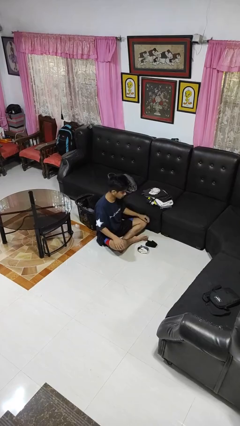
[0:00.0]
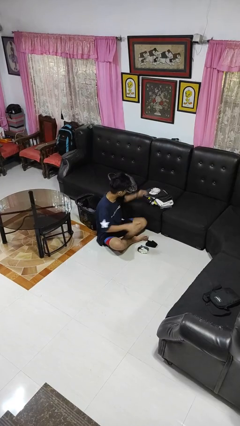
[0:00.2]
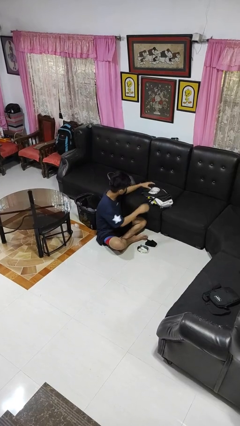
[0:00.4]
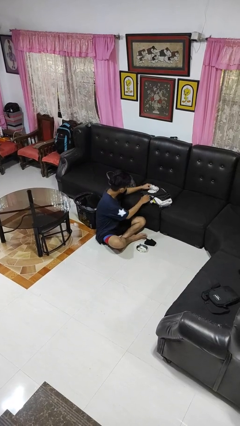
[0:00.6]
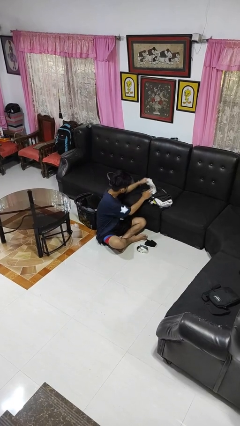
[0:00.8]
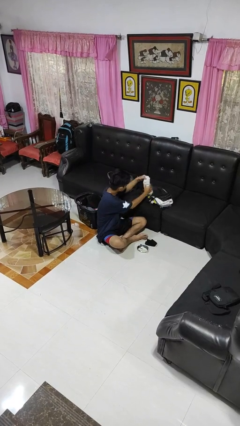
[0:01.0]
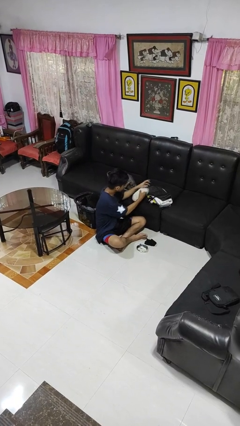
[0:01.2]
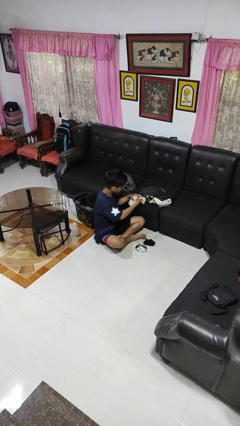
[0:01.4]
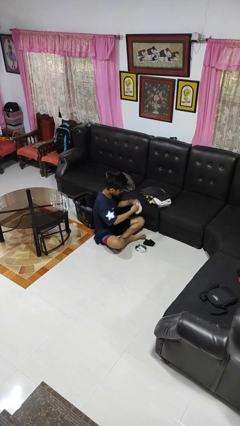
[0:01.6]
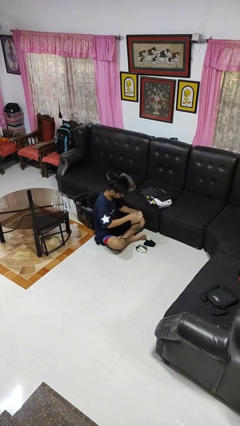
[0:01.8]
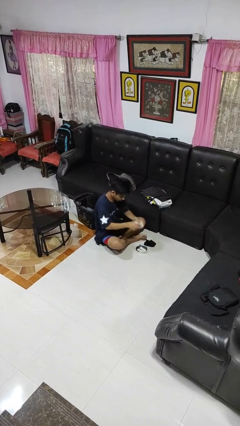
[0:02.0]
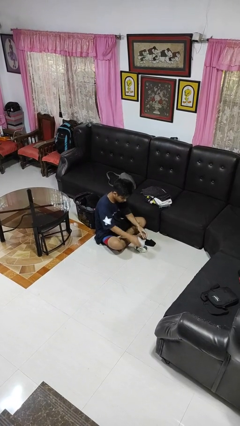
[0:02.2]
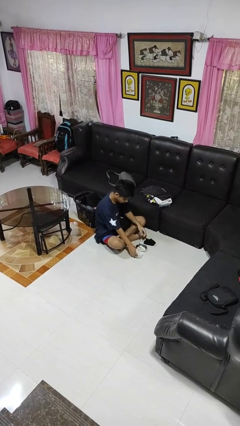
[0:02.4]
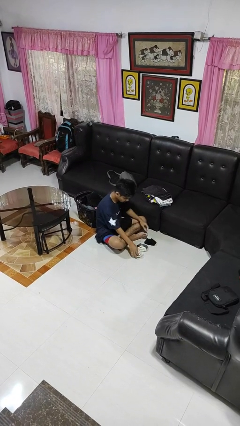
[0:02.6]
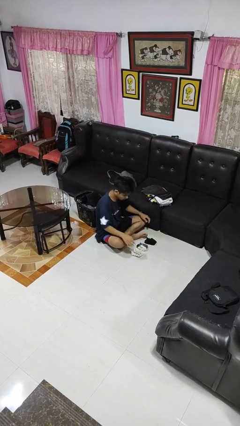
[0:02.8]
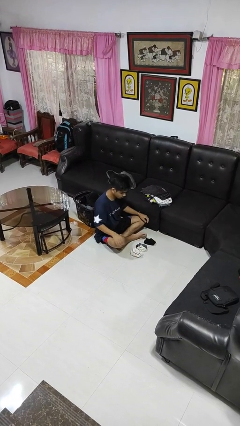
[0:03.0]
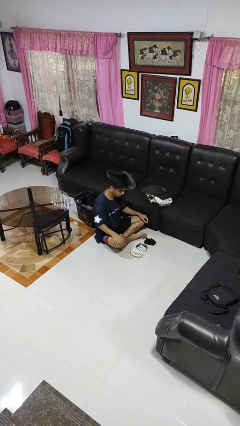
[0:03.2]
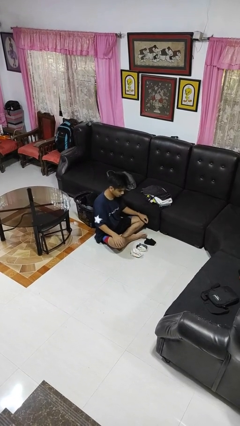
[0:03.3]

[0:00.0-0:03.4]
person folds socks

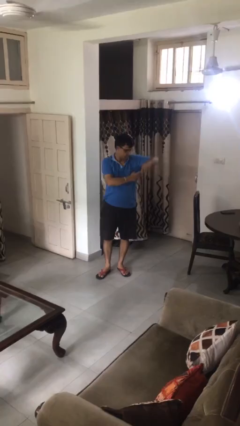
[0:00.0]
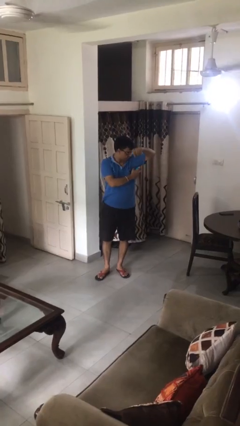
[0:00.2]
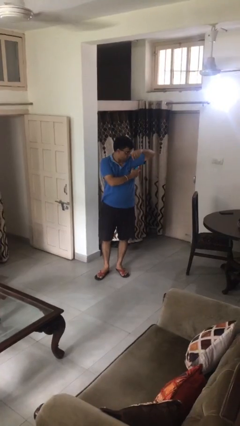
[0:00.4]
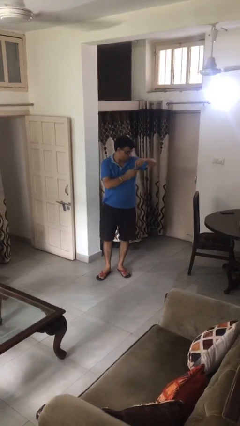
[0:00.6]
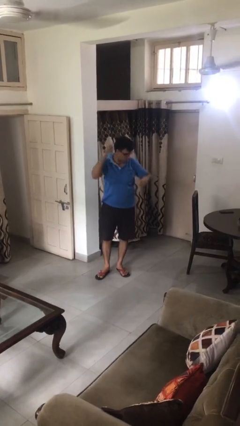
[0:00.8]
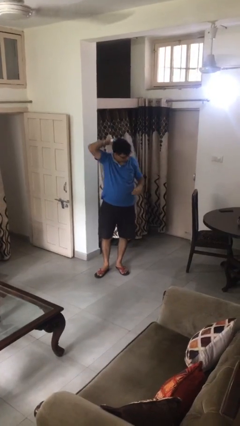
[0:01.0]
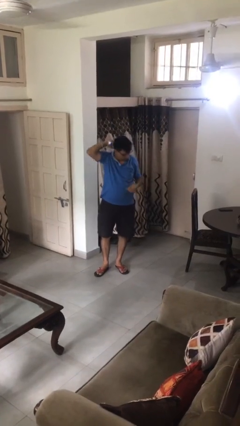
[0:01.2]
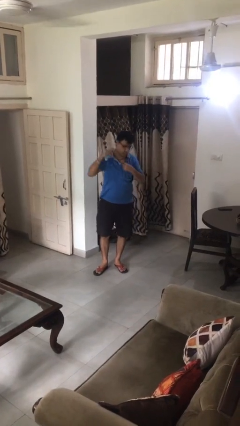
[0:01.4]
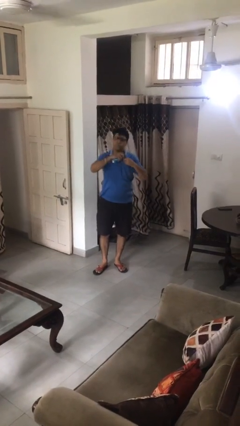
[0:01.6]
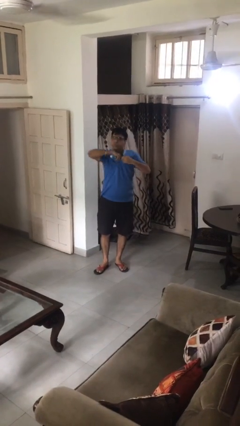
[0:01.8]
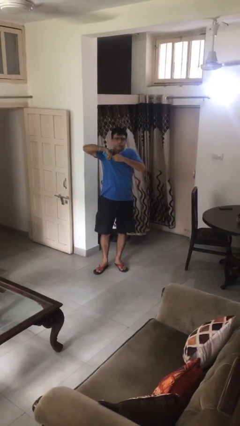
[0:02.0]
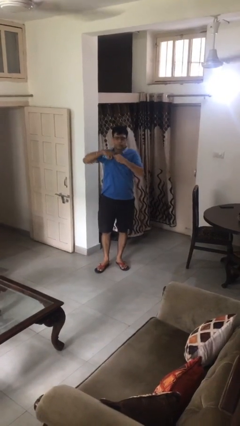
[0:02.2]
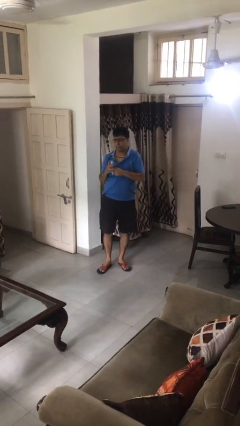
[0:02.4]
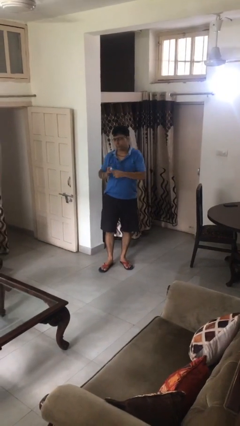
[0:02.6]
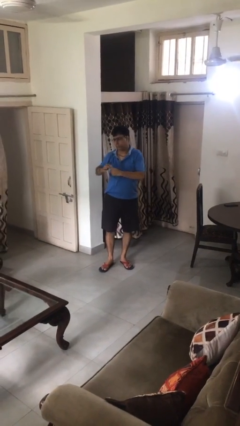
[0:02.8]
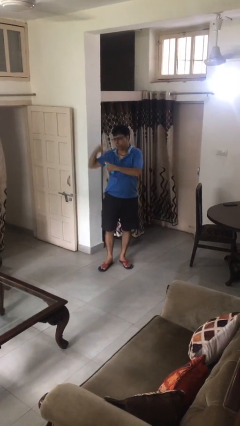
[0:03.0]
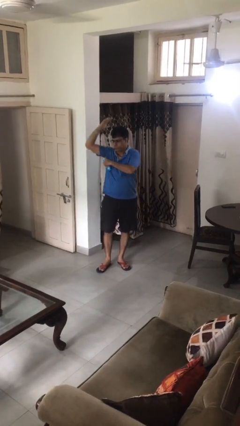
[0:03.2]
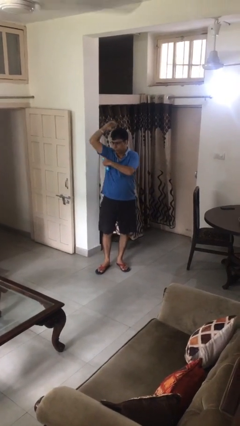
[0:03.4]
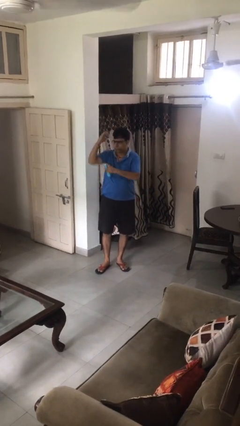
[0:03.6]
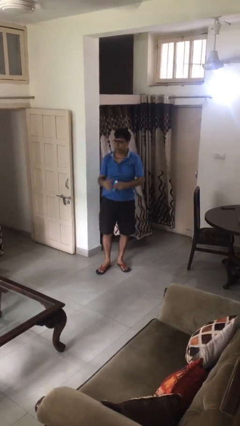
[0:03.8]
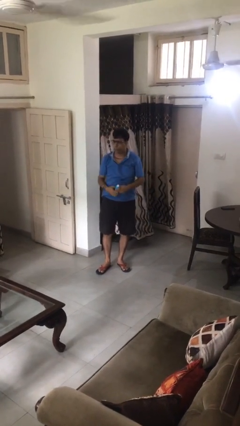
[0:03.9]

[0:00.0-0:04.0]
person applies deodorant

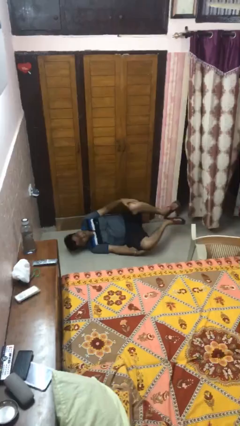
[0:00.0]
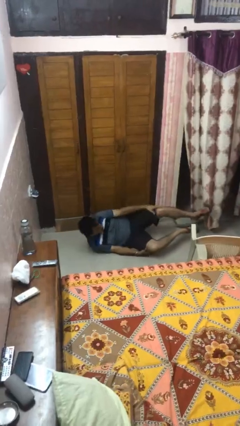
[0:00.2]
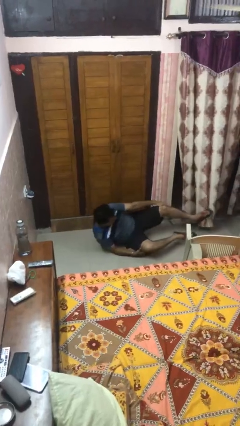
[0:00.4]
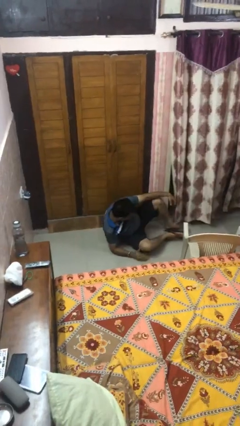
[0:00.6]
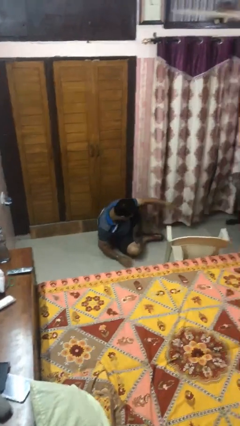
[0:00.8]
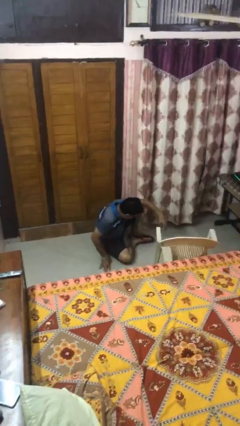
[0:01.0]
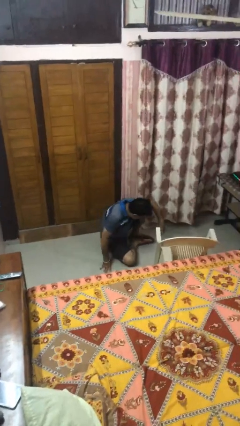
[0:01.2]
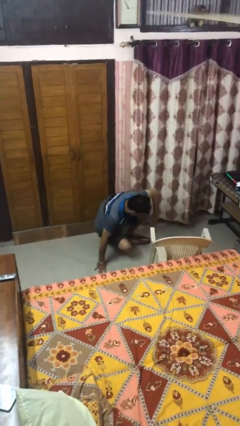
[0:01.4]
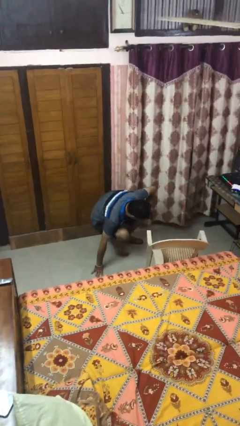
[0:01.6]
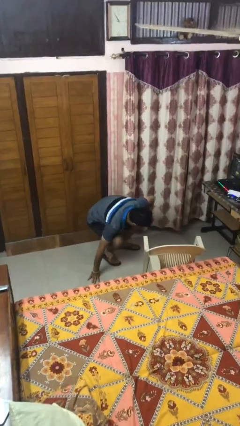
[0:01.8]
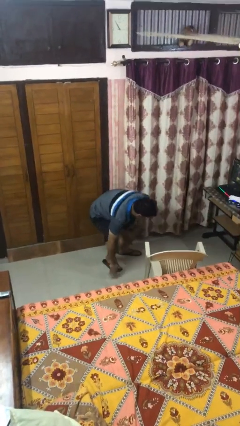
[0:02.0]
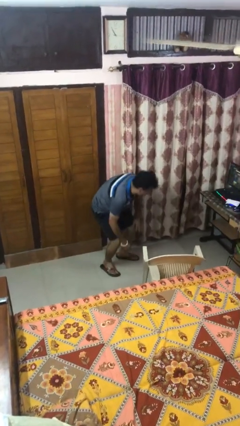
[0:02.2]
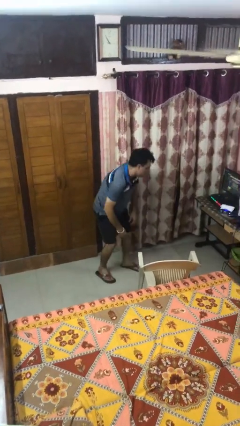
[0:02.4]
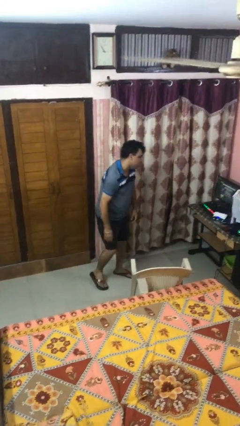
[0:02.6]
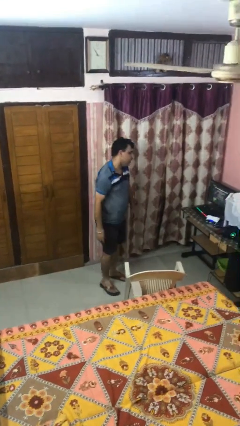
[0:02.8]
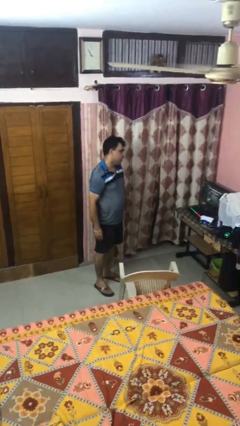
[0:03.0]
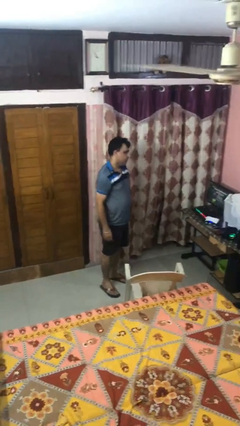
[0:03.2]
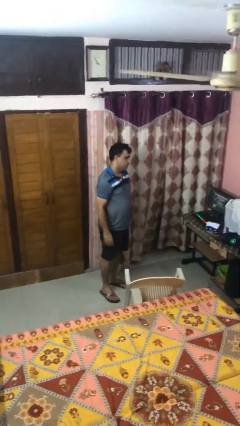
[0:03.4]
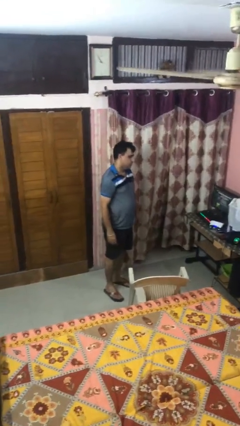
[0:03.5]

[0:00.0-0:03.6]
person stands up from floor

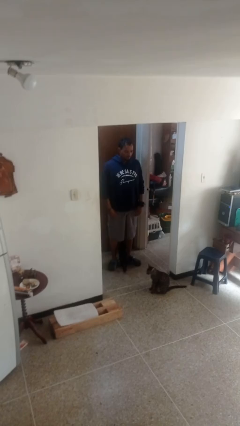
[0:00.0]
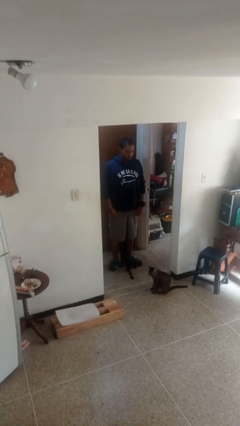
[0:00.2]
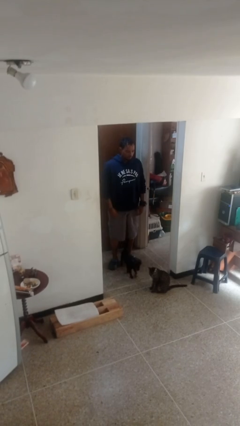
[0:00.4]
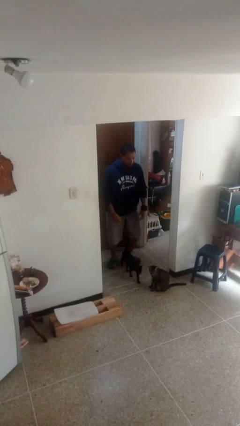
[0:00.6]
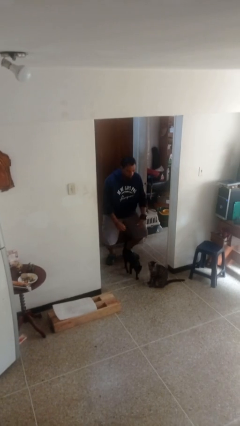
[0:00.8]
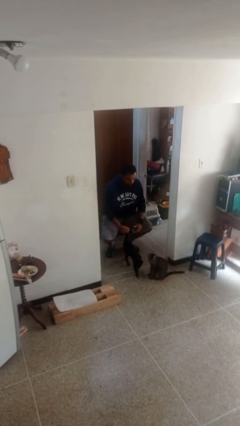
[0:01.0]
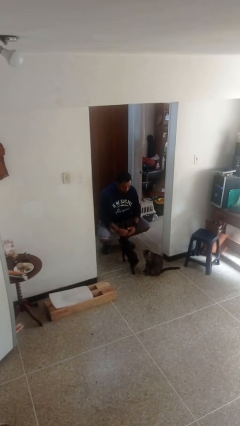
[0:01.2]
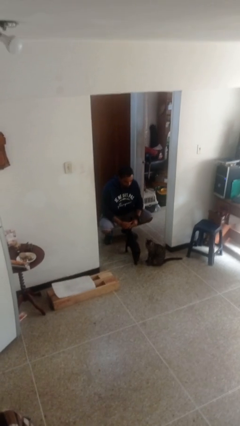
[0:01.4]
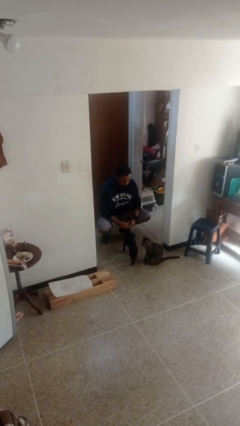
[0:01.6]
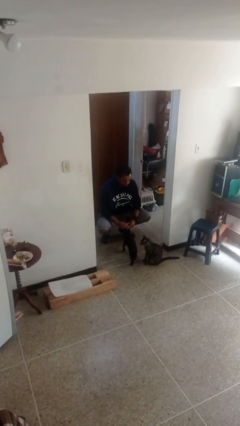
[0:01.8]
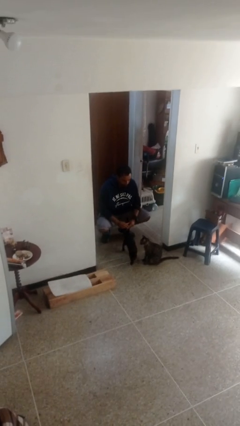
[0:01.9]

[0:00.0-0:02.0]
person squats

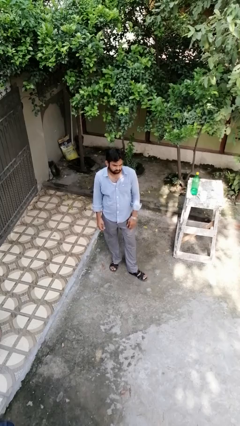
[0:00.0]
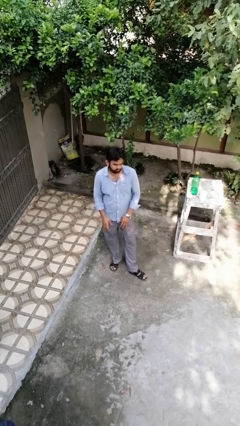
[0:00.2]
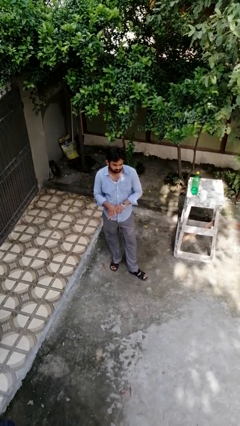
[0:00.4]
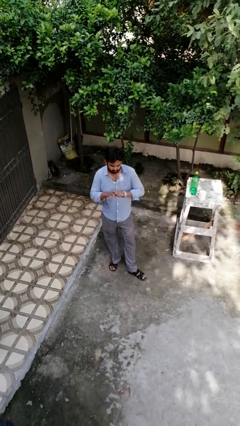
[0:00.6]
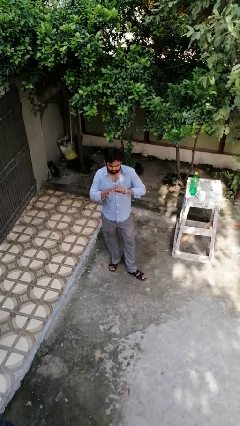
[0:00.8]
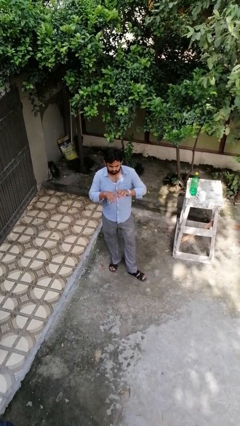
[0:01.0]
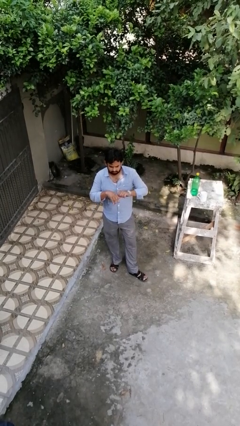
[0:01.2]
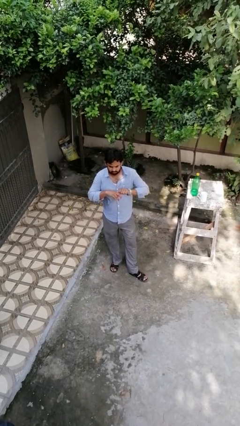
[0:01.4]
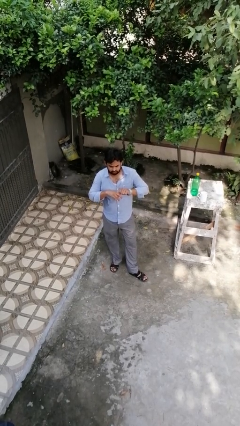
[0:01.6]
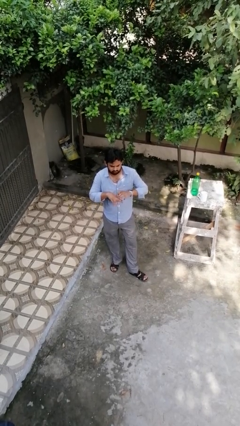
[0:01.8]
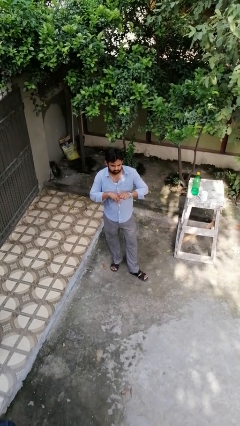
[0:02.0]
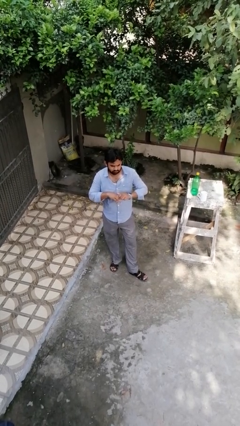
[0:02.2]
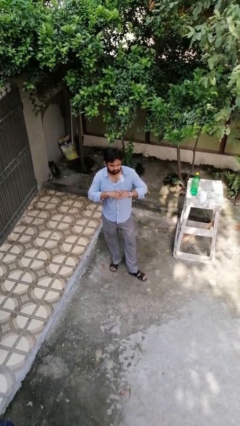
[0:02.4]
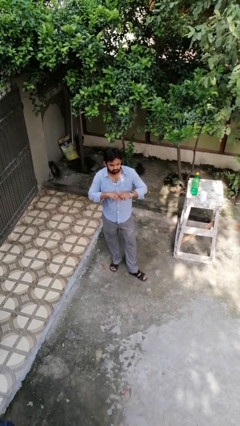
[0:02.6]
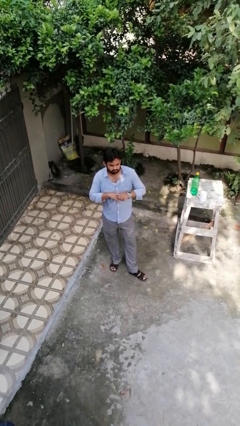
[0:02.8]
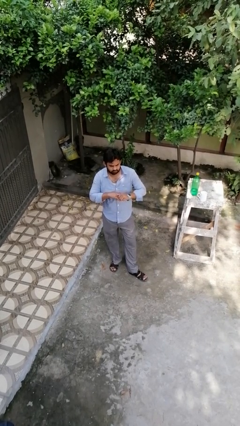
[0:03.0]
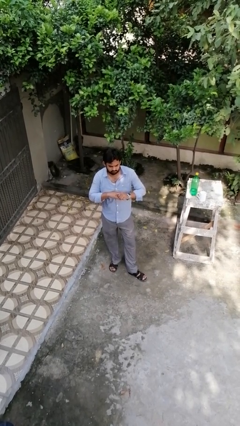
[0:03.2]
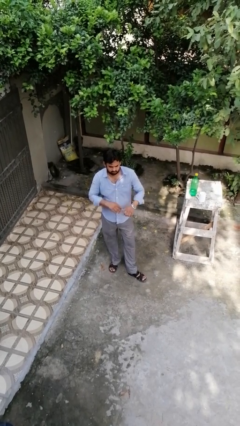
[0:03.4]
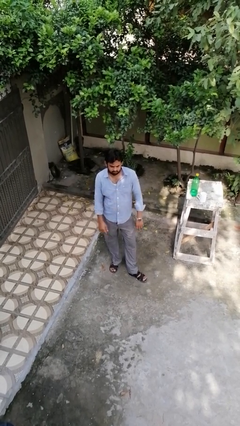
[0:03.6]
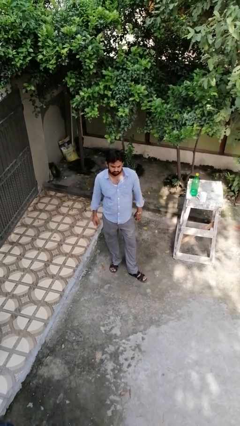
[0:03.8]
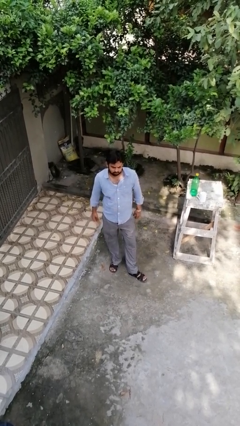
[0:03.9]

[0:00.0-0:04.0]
person snaps fingers

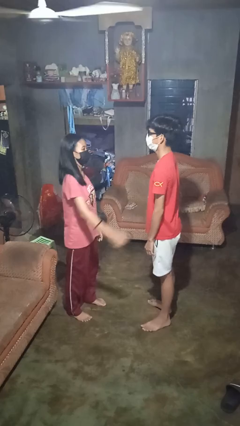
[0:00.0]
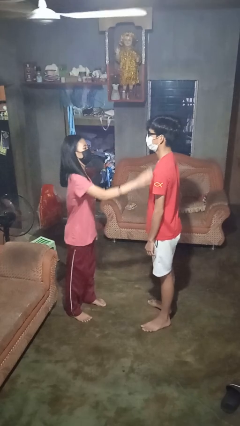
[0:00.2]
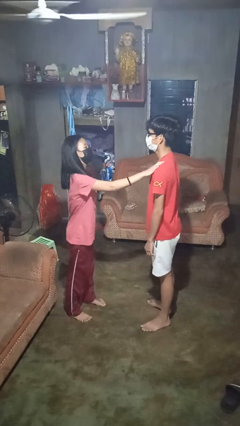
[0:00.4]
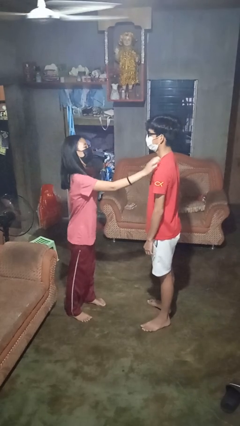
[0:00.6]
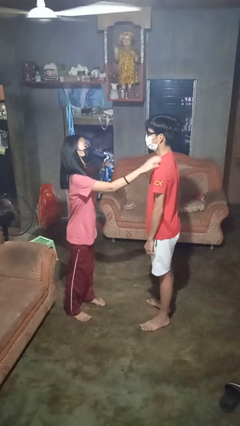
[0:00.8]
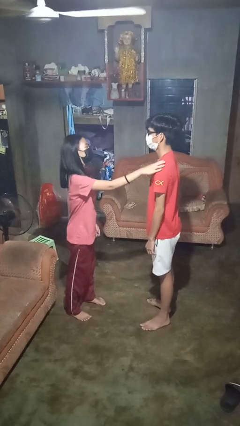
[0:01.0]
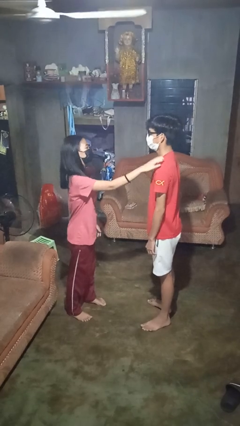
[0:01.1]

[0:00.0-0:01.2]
person pounds shoulders of person
